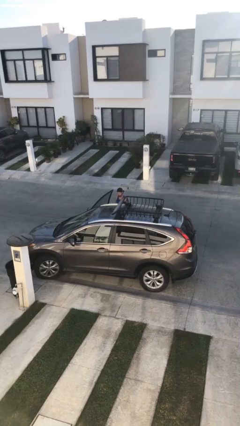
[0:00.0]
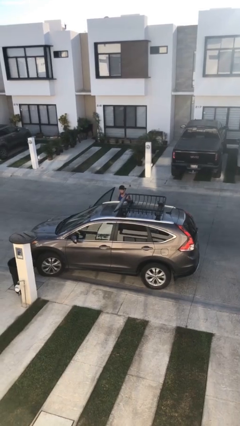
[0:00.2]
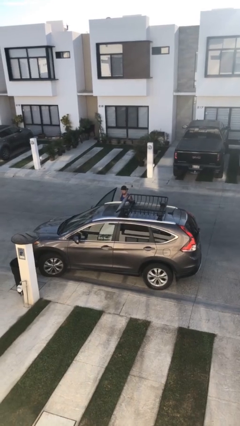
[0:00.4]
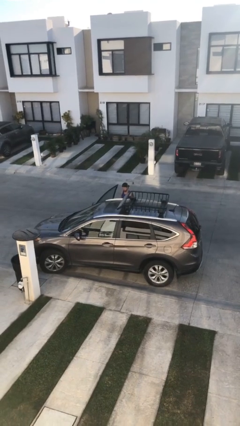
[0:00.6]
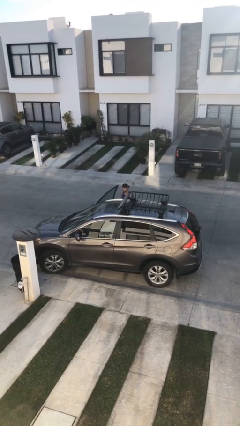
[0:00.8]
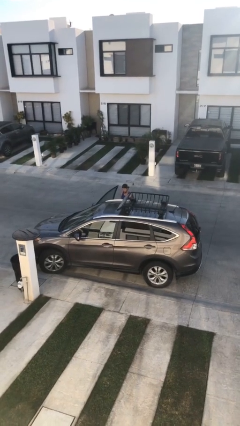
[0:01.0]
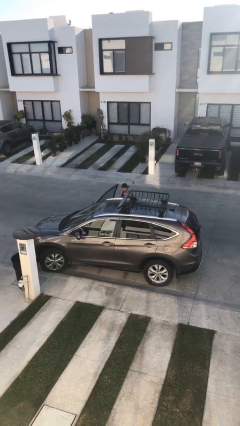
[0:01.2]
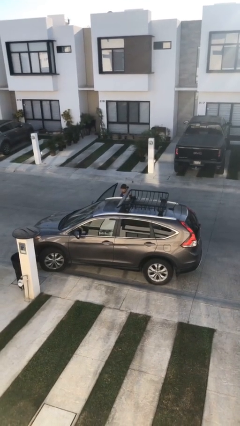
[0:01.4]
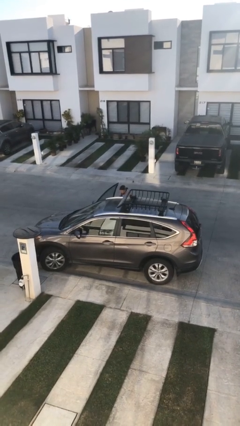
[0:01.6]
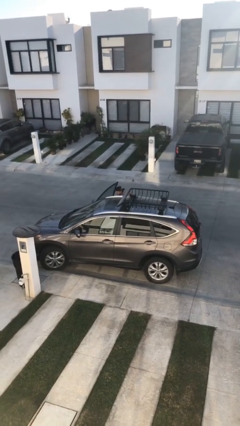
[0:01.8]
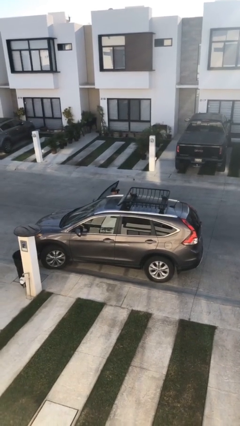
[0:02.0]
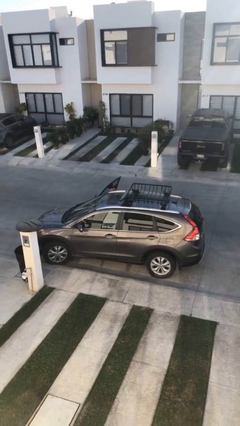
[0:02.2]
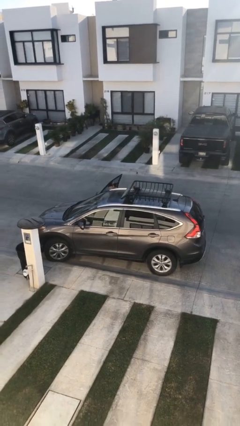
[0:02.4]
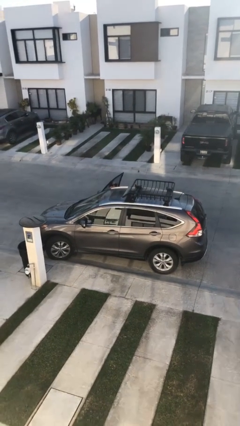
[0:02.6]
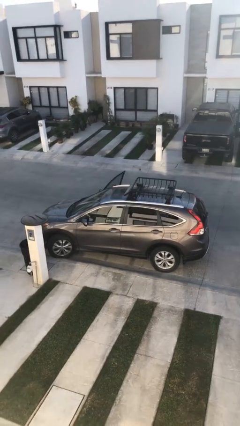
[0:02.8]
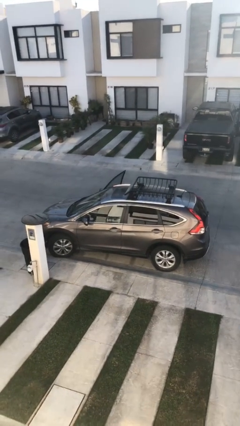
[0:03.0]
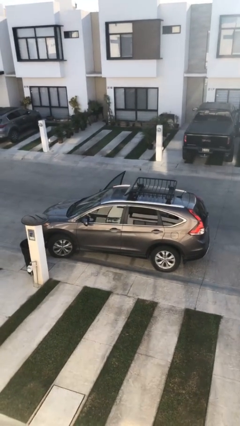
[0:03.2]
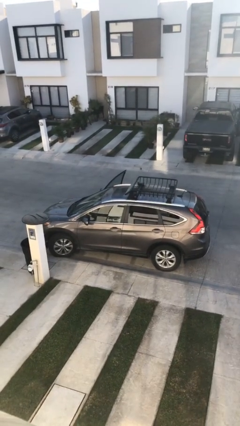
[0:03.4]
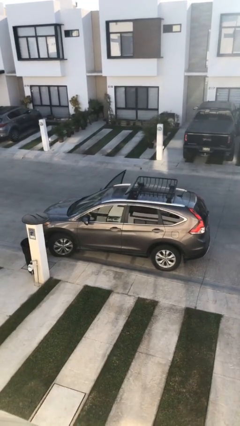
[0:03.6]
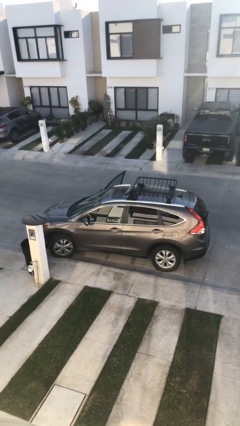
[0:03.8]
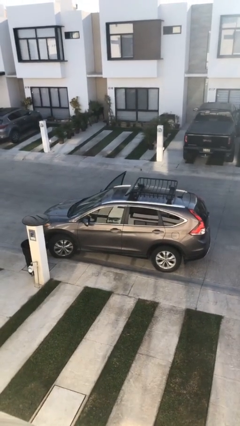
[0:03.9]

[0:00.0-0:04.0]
person enters car

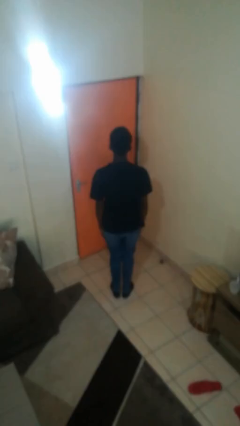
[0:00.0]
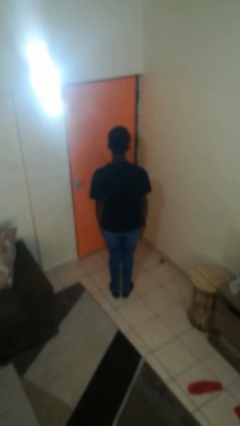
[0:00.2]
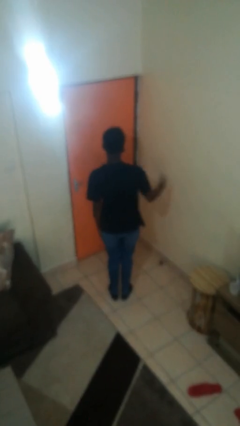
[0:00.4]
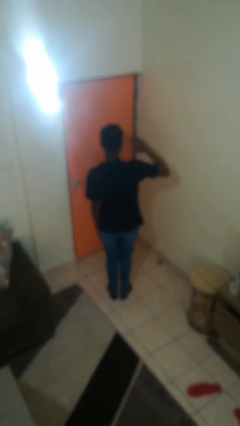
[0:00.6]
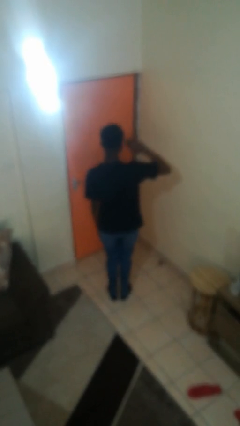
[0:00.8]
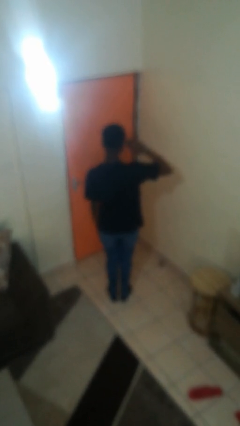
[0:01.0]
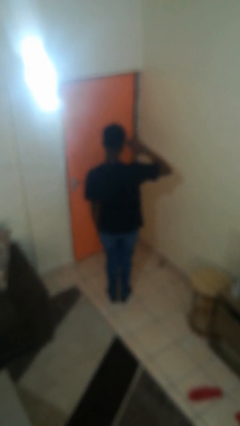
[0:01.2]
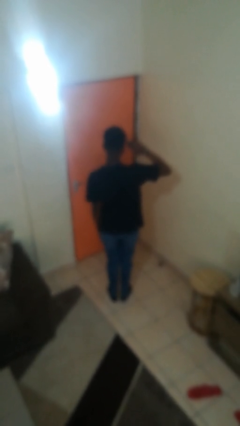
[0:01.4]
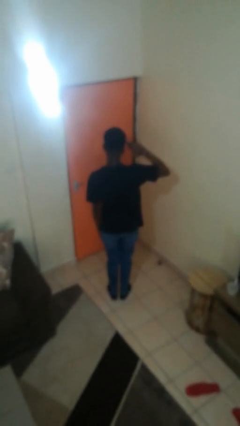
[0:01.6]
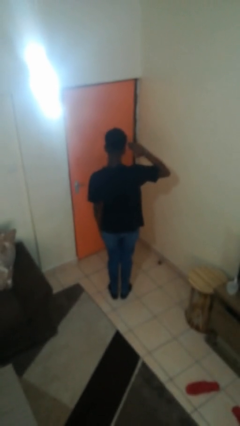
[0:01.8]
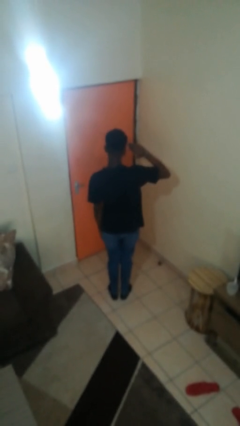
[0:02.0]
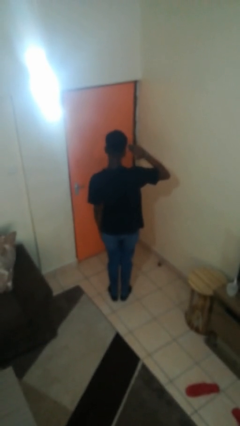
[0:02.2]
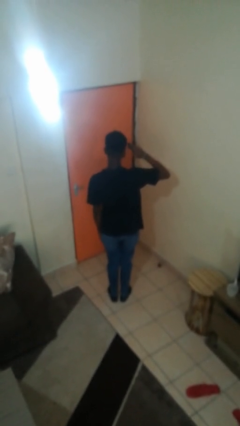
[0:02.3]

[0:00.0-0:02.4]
person salutes

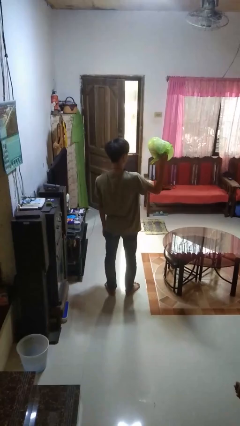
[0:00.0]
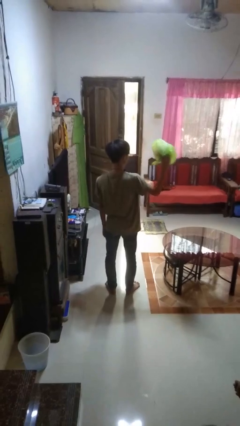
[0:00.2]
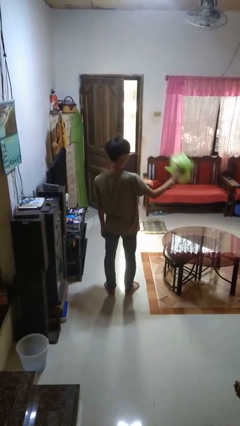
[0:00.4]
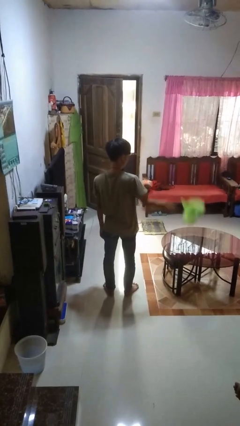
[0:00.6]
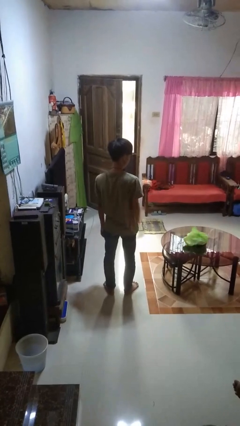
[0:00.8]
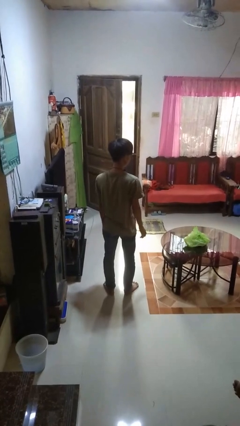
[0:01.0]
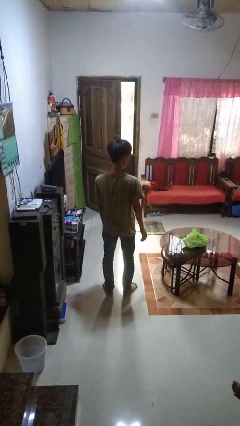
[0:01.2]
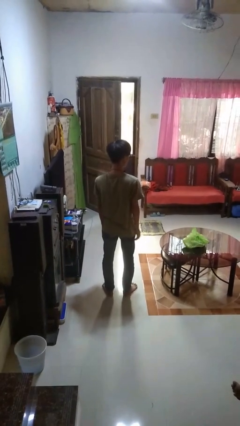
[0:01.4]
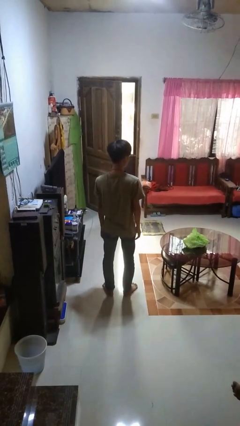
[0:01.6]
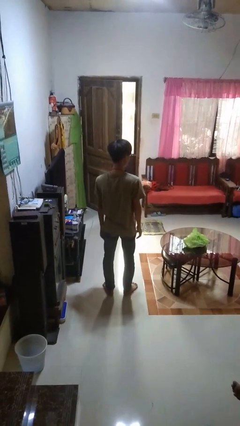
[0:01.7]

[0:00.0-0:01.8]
person throws object on table

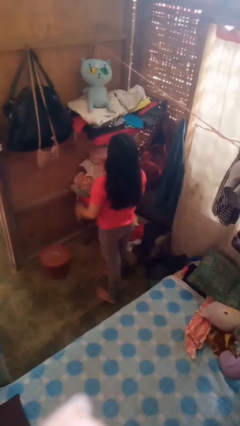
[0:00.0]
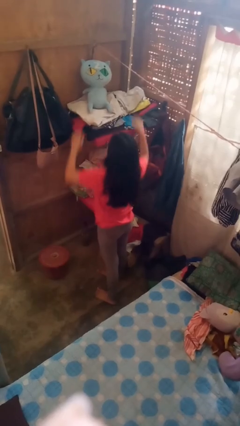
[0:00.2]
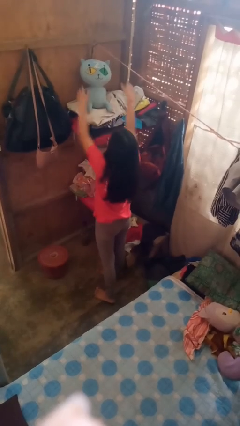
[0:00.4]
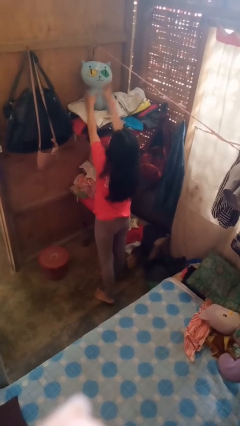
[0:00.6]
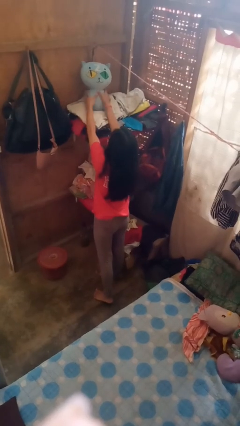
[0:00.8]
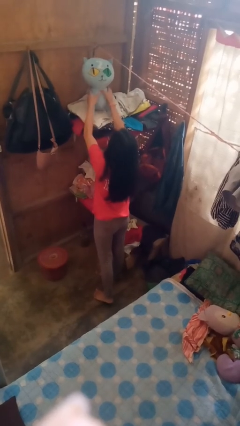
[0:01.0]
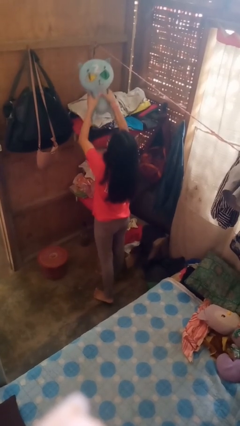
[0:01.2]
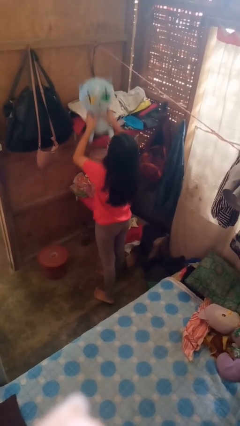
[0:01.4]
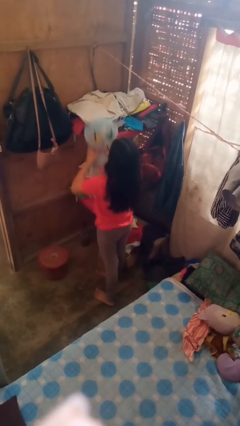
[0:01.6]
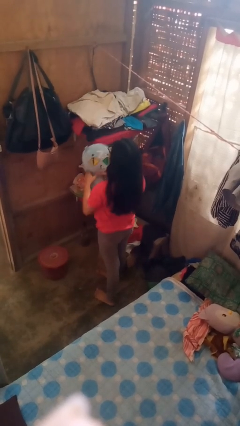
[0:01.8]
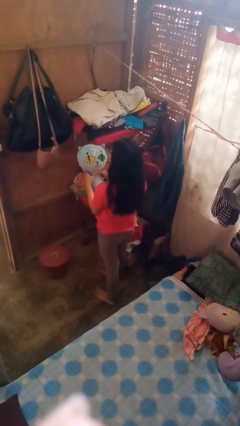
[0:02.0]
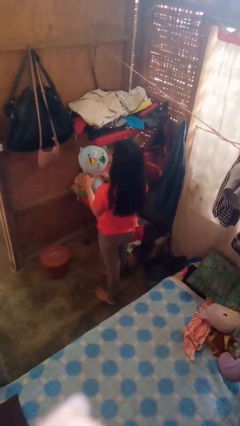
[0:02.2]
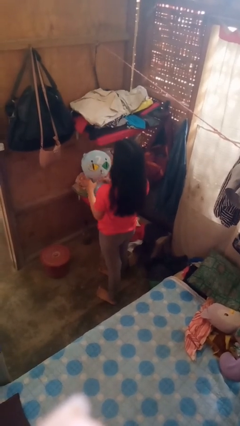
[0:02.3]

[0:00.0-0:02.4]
person picks up object from shelf

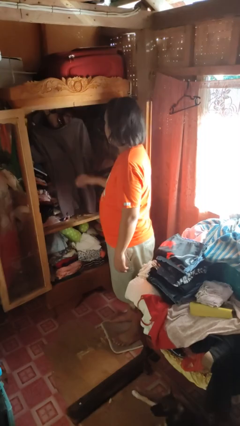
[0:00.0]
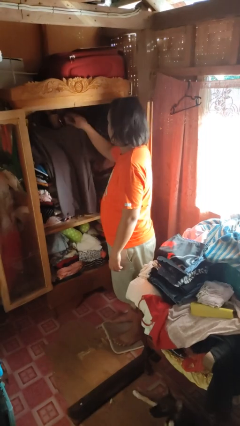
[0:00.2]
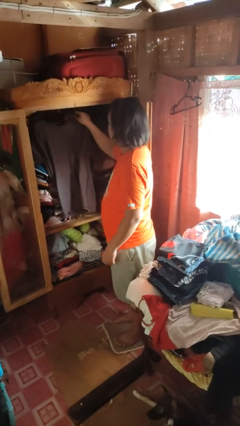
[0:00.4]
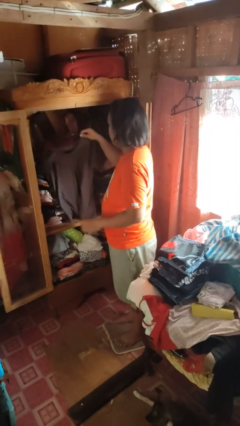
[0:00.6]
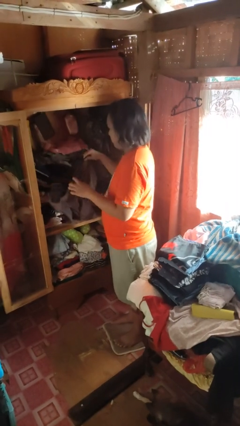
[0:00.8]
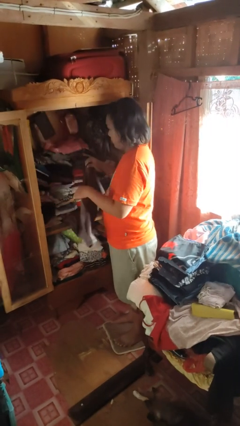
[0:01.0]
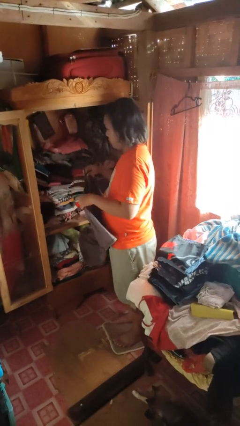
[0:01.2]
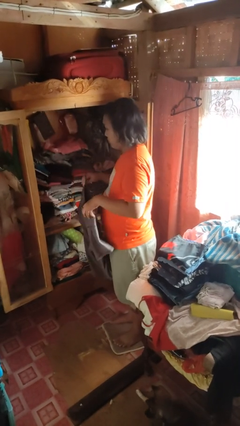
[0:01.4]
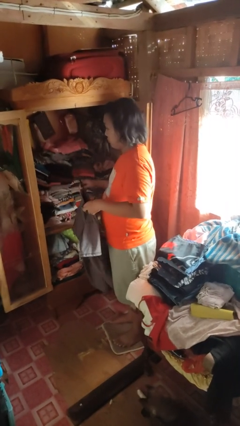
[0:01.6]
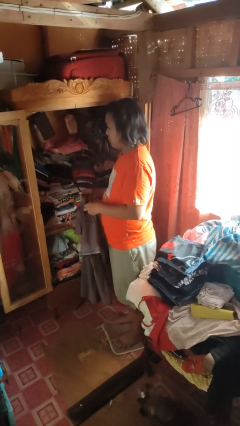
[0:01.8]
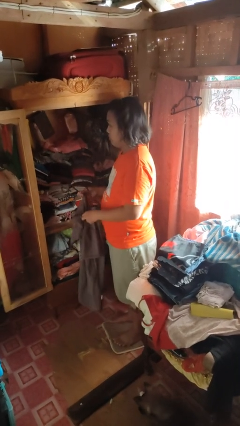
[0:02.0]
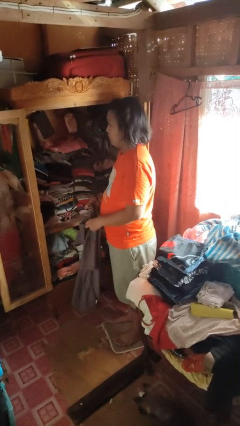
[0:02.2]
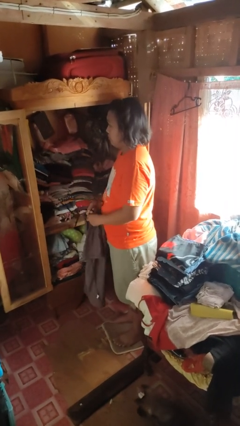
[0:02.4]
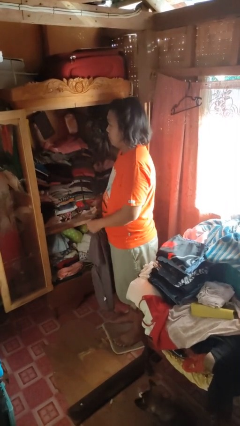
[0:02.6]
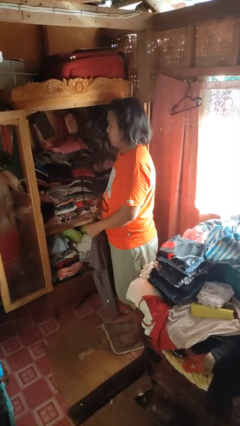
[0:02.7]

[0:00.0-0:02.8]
person takes clothes from closet

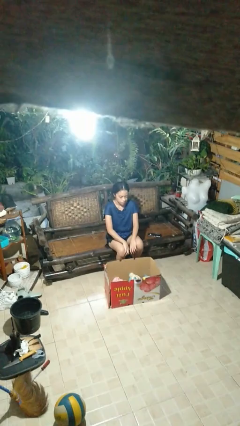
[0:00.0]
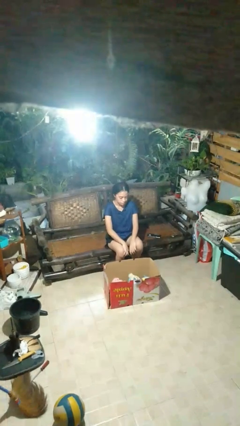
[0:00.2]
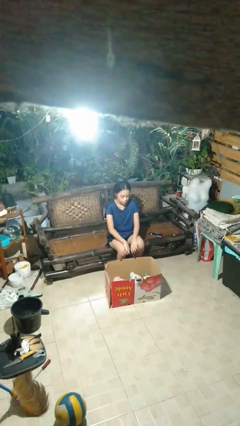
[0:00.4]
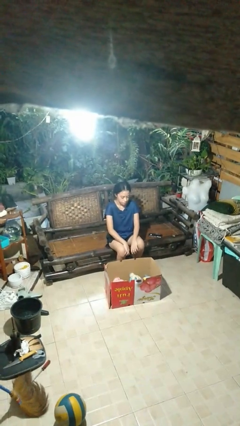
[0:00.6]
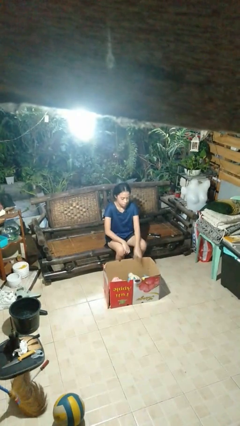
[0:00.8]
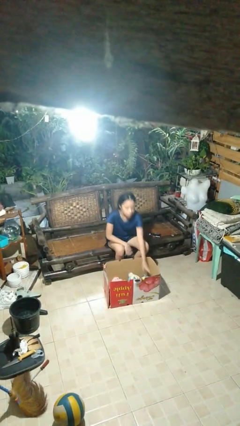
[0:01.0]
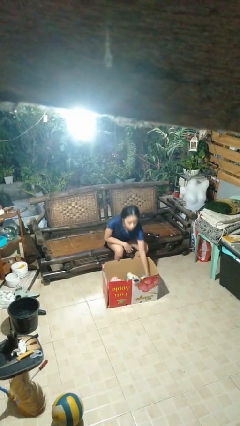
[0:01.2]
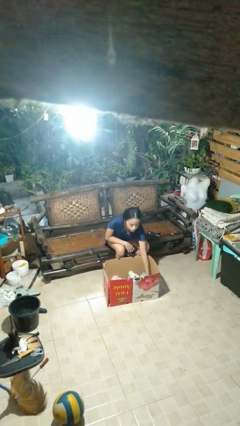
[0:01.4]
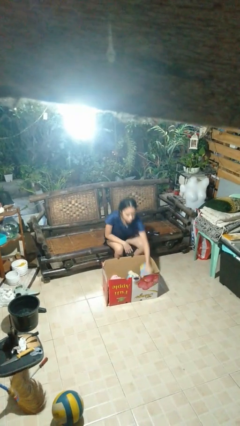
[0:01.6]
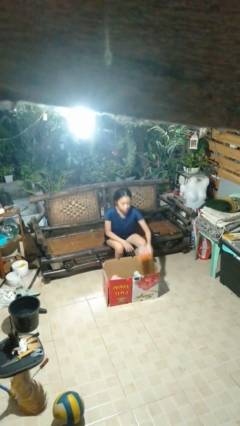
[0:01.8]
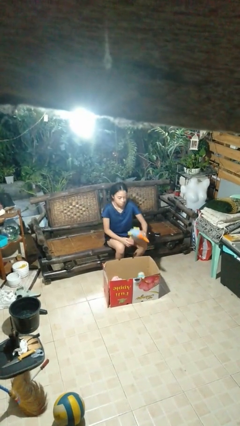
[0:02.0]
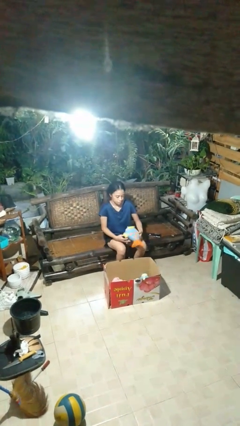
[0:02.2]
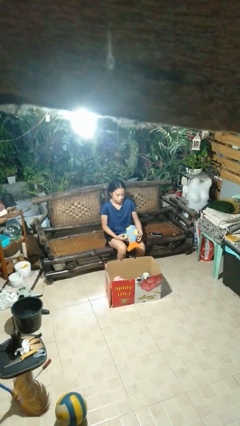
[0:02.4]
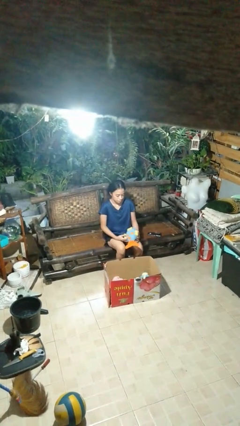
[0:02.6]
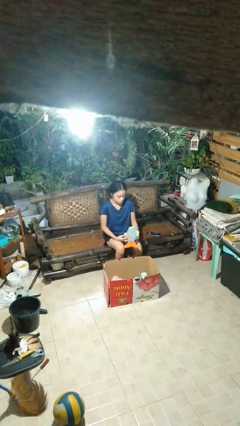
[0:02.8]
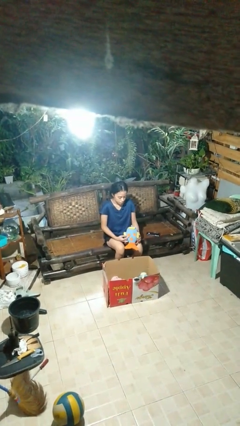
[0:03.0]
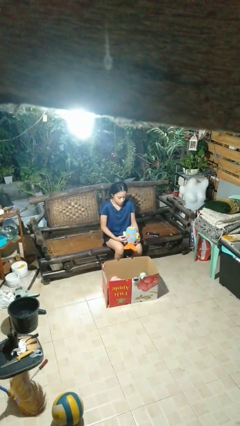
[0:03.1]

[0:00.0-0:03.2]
person takes object from box

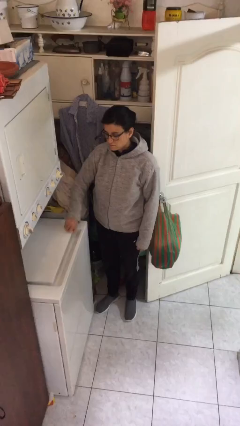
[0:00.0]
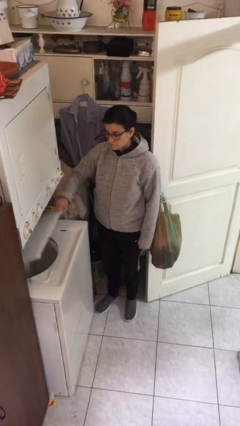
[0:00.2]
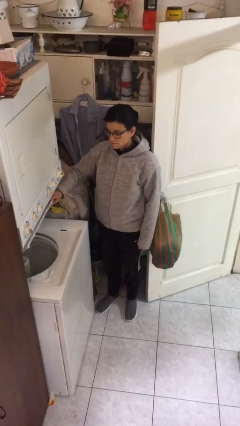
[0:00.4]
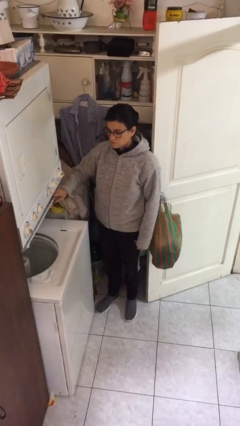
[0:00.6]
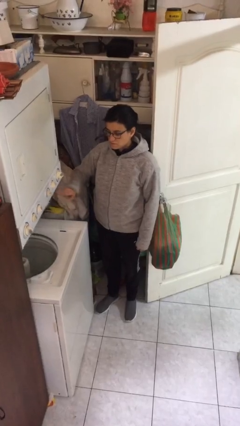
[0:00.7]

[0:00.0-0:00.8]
person opens clothes washer
